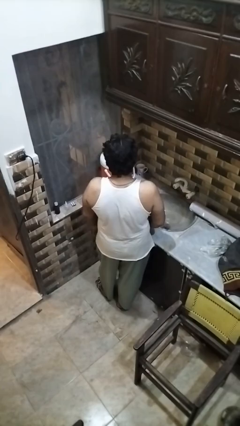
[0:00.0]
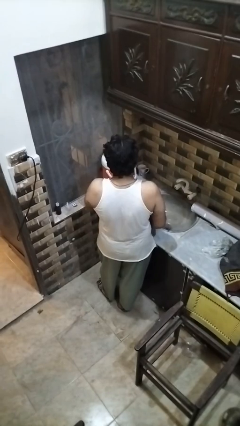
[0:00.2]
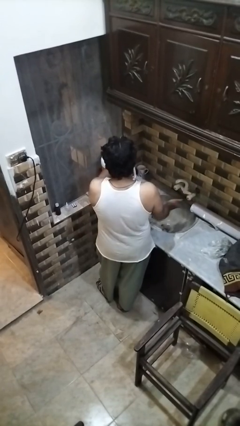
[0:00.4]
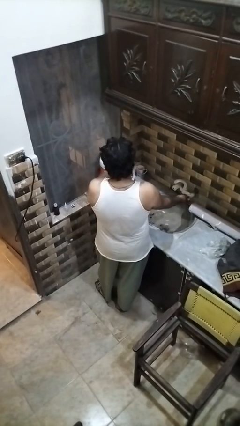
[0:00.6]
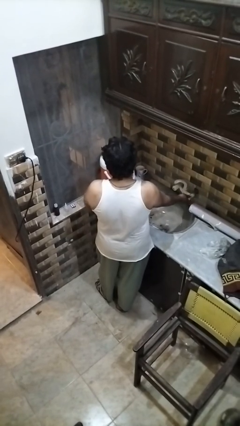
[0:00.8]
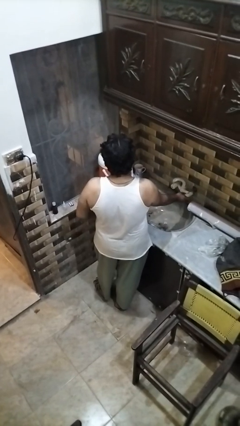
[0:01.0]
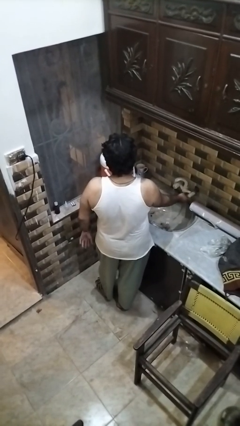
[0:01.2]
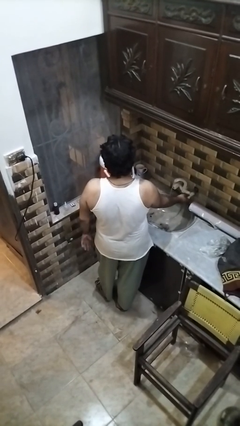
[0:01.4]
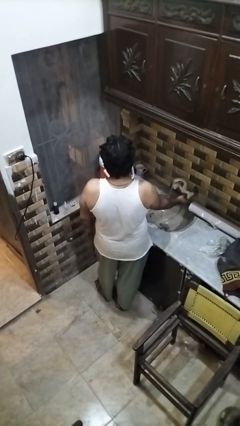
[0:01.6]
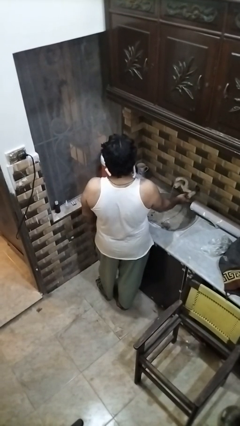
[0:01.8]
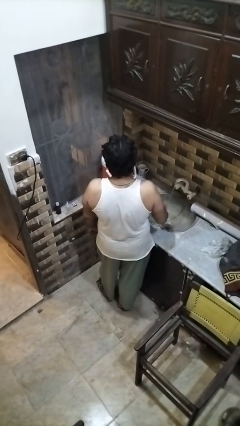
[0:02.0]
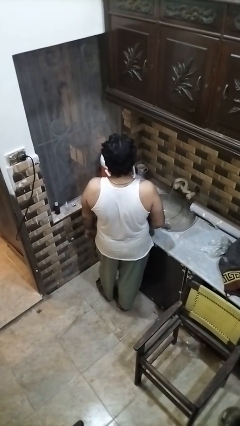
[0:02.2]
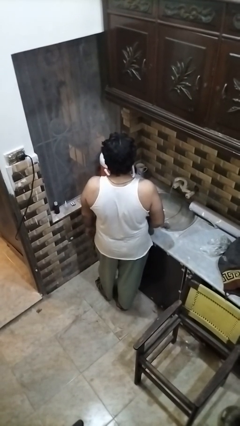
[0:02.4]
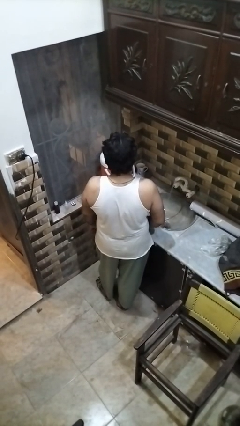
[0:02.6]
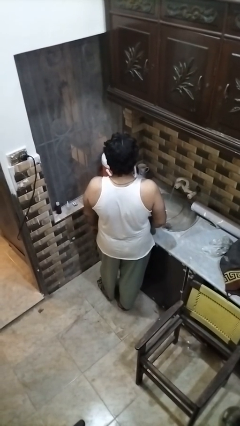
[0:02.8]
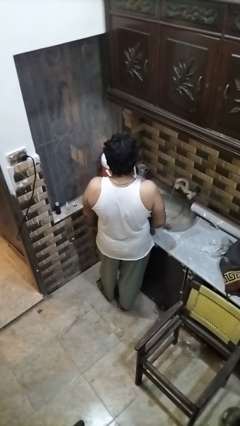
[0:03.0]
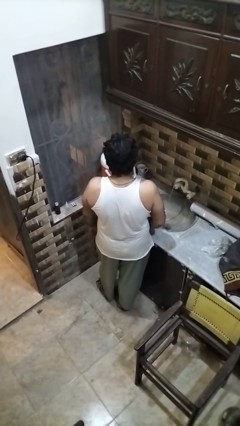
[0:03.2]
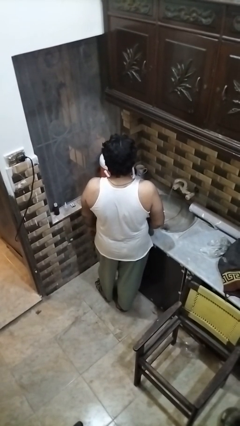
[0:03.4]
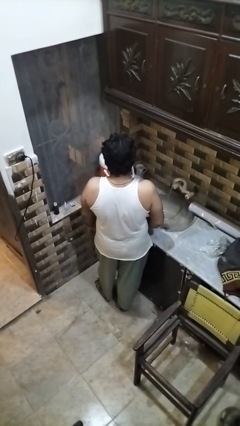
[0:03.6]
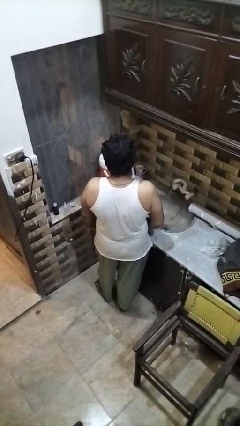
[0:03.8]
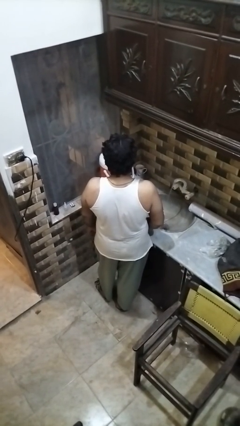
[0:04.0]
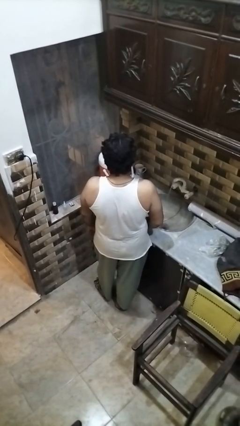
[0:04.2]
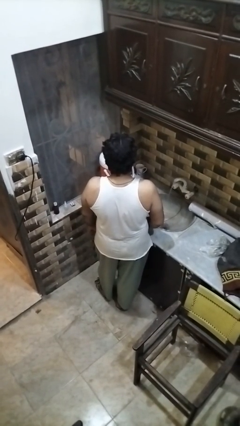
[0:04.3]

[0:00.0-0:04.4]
person turns on faucet

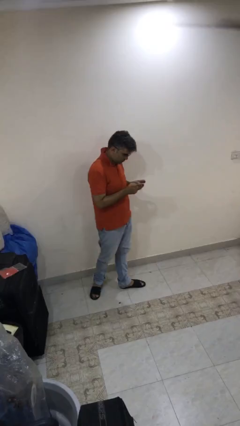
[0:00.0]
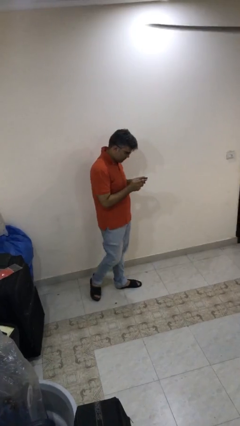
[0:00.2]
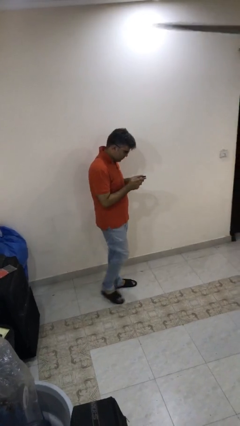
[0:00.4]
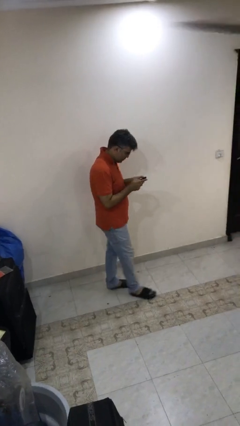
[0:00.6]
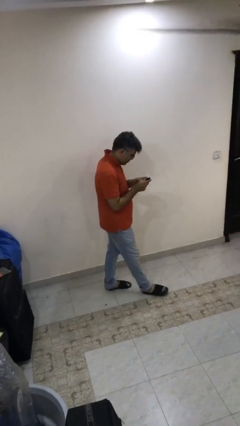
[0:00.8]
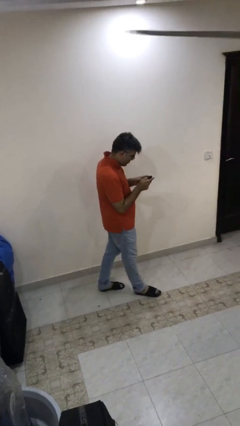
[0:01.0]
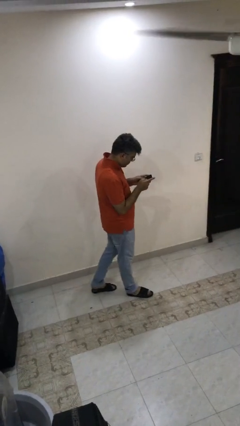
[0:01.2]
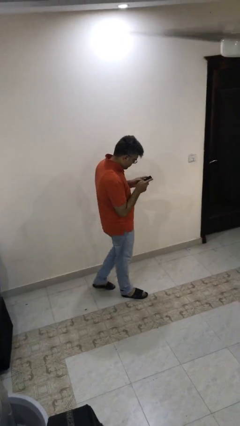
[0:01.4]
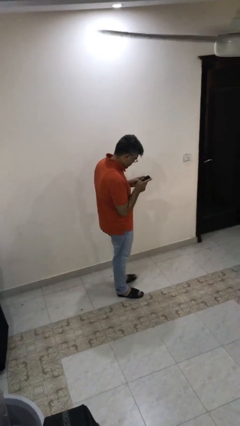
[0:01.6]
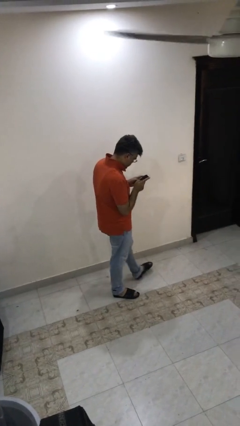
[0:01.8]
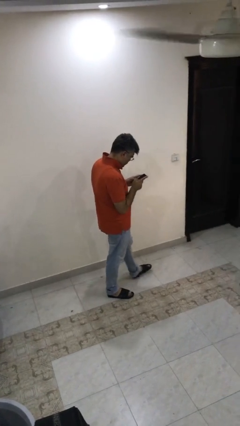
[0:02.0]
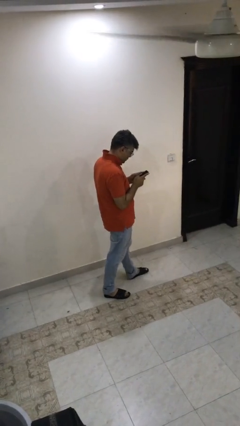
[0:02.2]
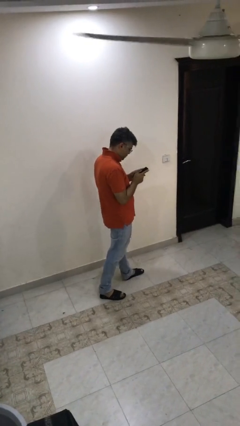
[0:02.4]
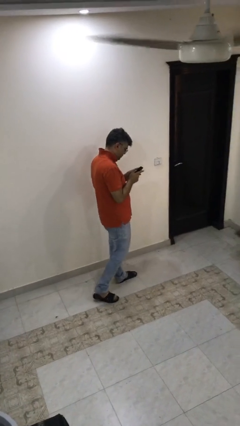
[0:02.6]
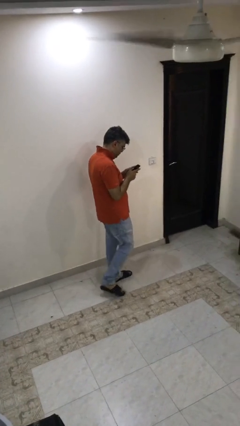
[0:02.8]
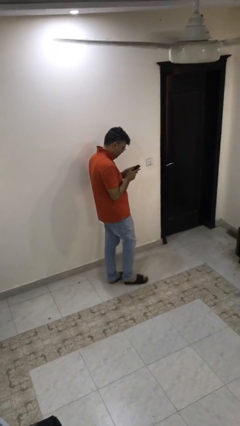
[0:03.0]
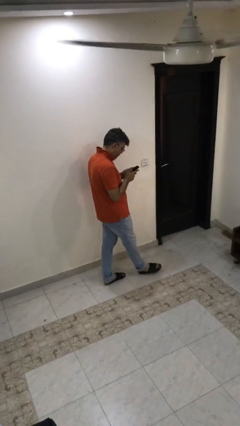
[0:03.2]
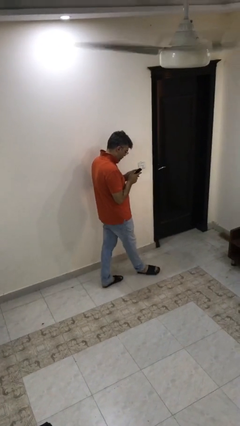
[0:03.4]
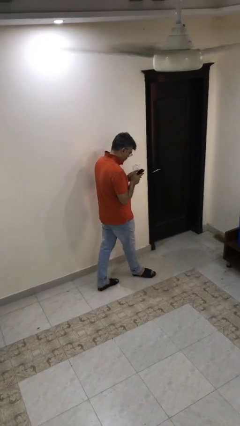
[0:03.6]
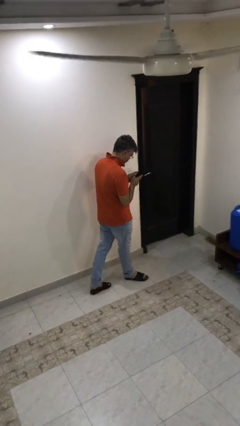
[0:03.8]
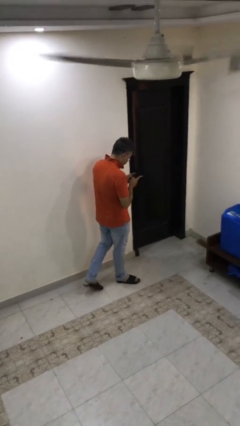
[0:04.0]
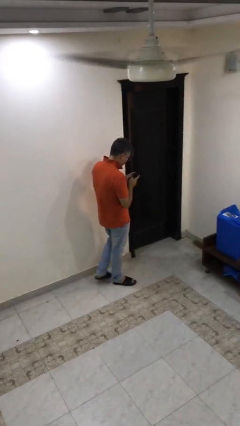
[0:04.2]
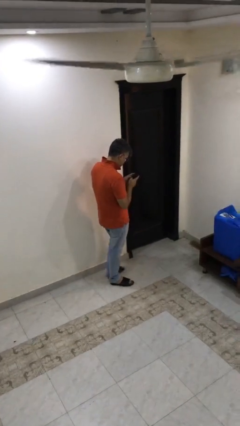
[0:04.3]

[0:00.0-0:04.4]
person texts on phone

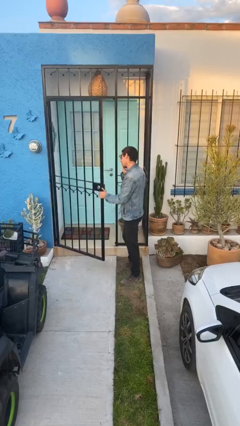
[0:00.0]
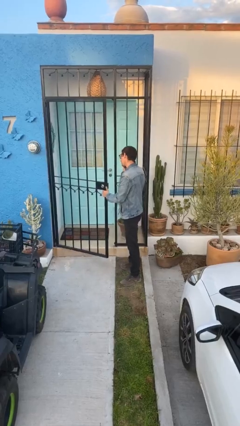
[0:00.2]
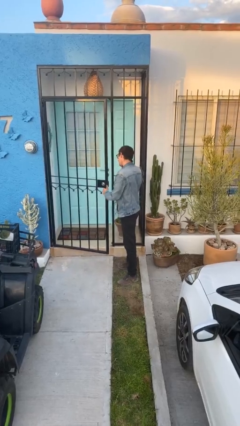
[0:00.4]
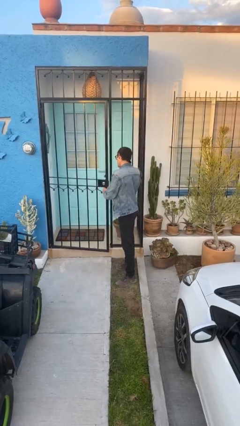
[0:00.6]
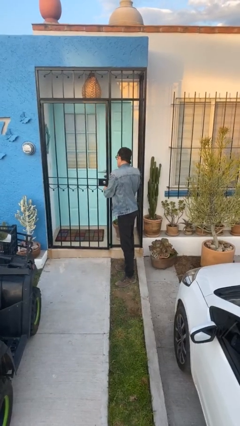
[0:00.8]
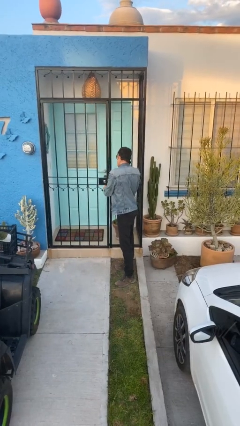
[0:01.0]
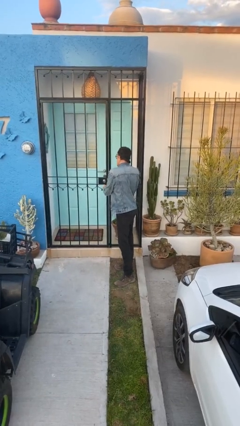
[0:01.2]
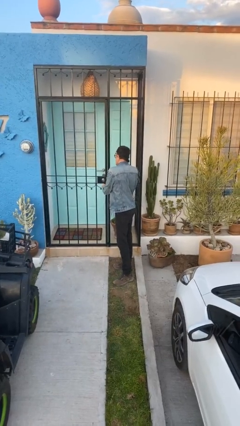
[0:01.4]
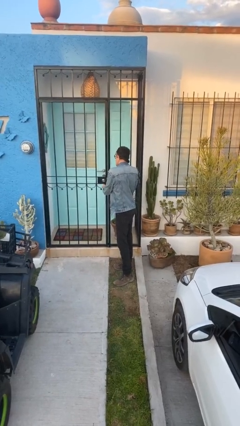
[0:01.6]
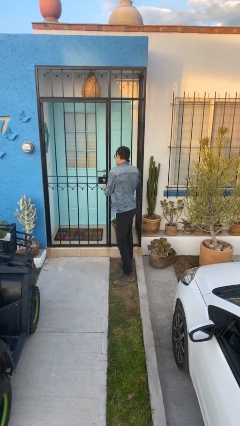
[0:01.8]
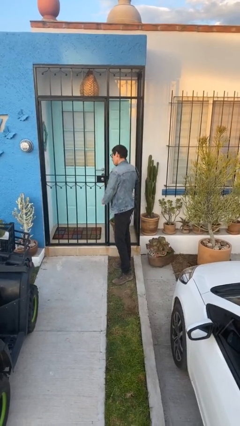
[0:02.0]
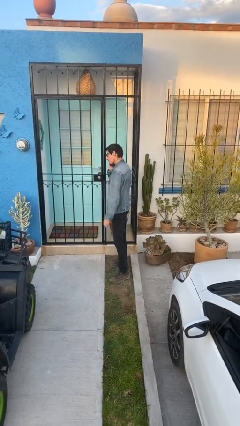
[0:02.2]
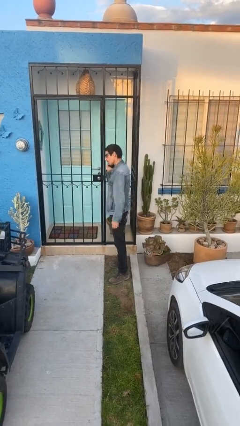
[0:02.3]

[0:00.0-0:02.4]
person closes facility door

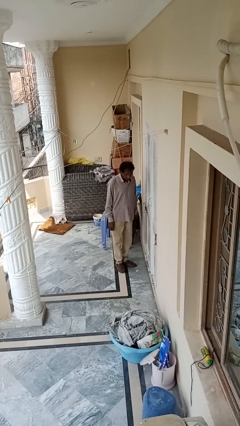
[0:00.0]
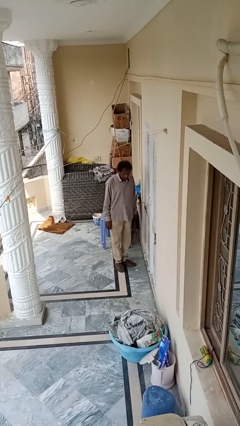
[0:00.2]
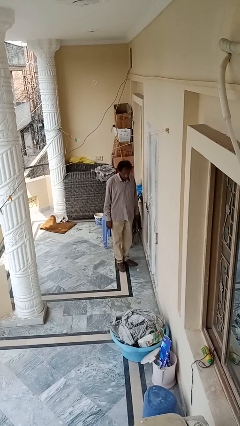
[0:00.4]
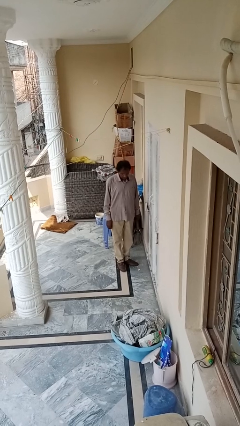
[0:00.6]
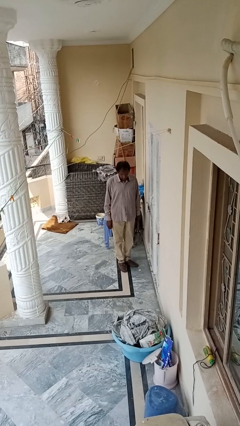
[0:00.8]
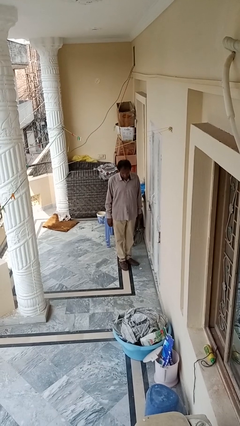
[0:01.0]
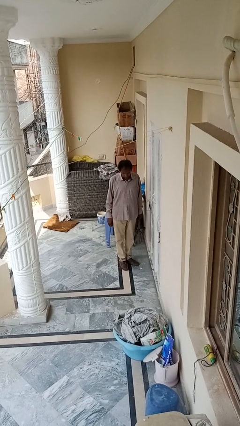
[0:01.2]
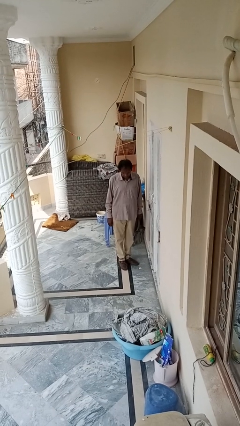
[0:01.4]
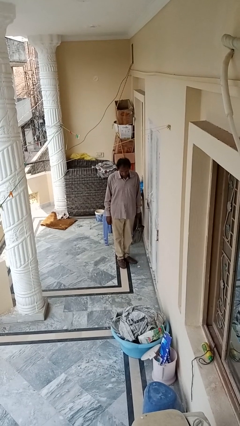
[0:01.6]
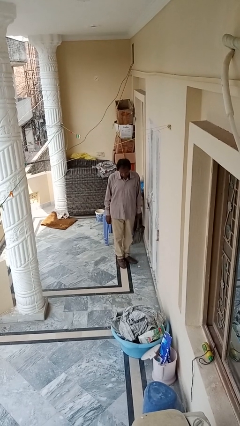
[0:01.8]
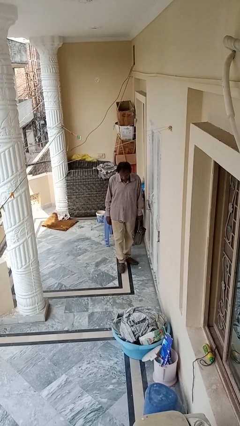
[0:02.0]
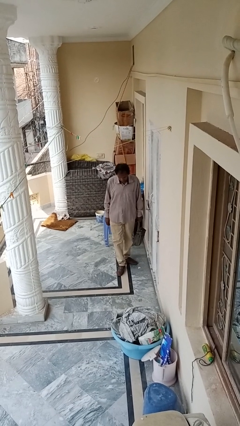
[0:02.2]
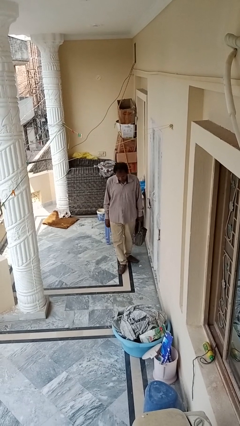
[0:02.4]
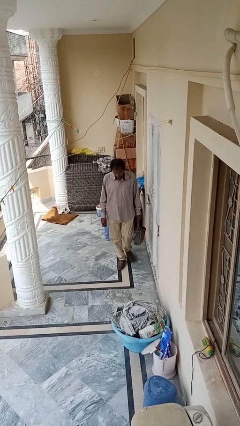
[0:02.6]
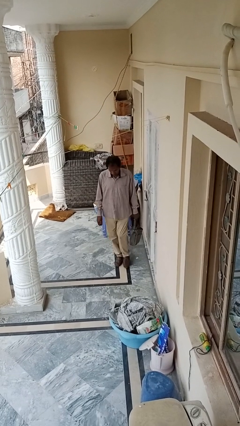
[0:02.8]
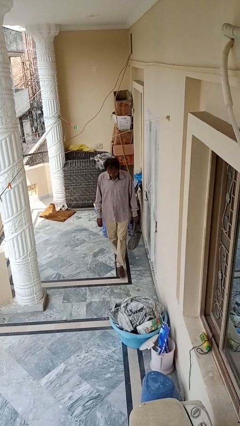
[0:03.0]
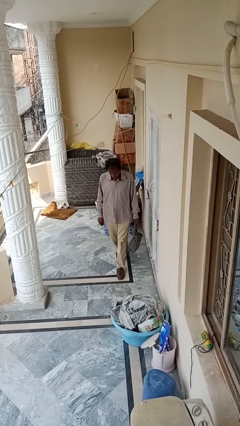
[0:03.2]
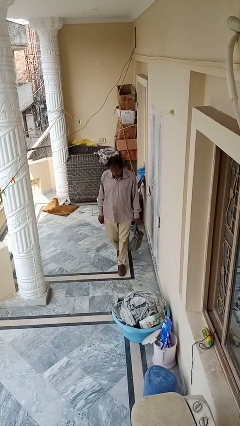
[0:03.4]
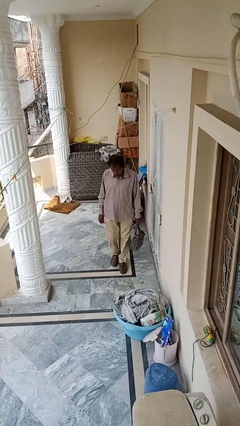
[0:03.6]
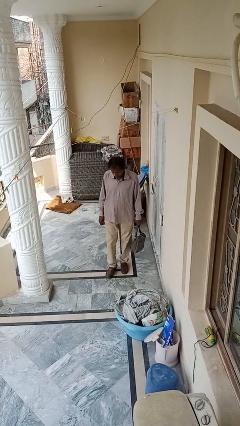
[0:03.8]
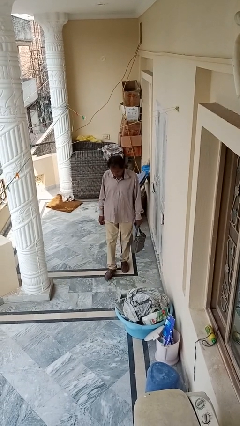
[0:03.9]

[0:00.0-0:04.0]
person carries groceries

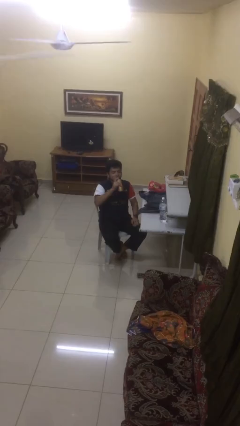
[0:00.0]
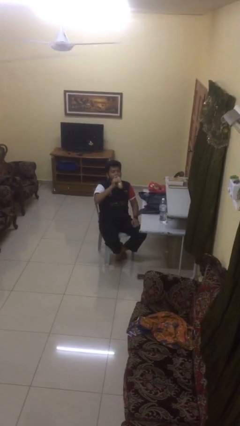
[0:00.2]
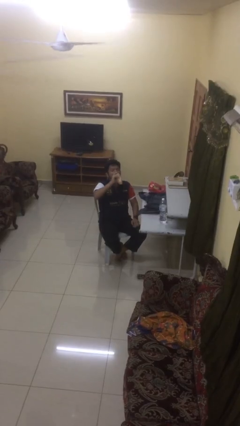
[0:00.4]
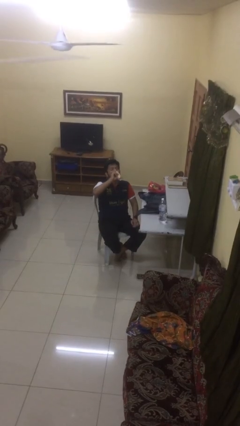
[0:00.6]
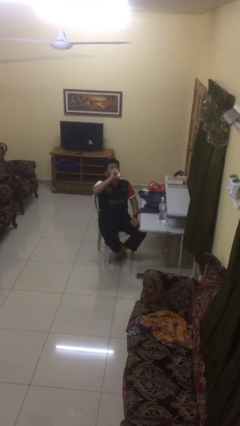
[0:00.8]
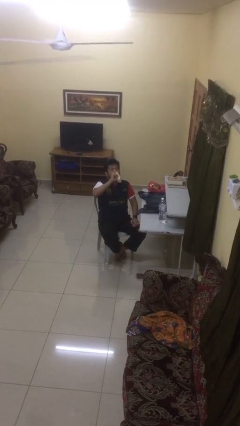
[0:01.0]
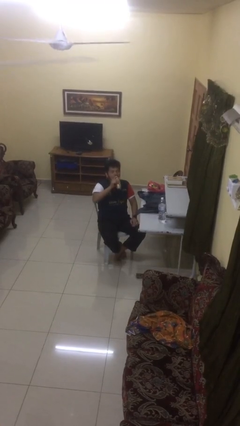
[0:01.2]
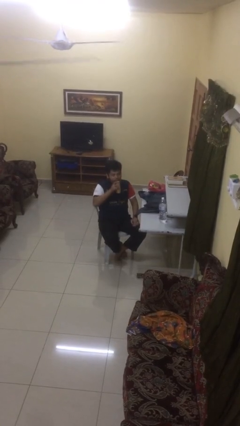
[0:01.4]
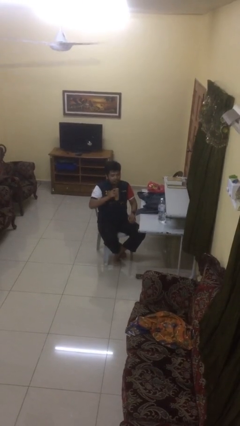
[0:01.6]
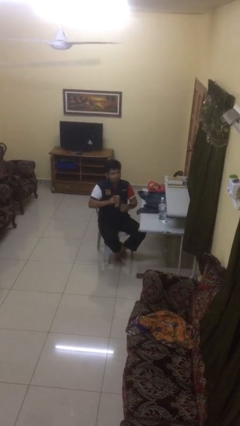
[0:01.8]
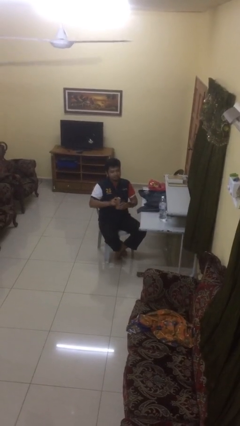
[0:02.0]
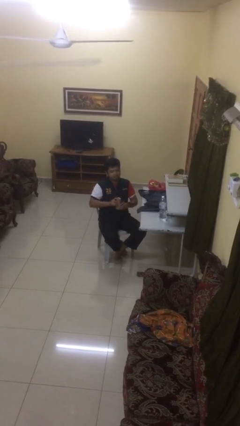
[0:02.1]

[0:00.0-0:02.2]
person drinks from beverage can

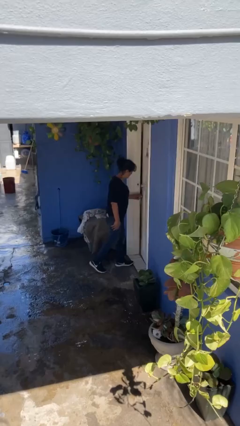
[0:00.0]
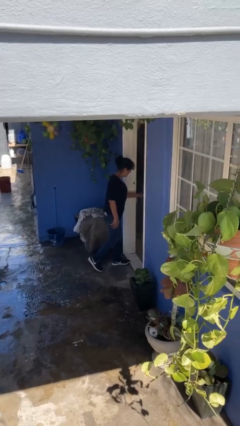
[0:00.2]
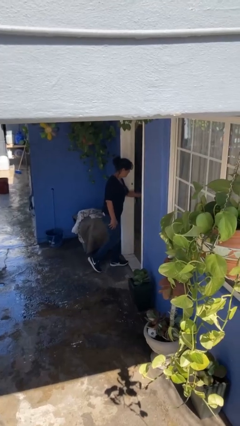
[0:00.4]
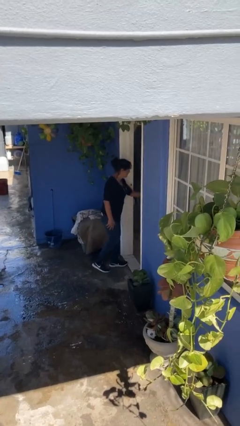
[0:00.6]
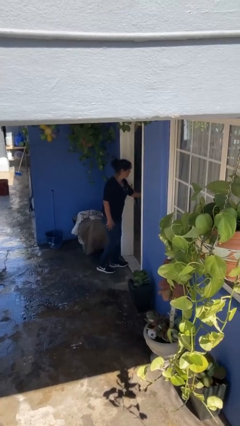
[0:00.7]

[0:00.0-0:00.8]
person opens facility door
